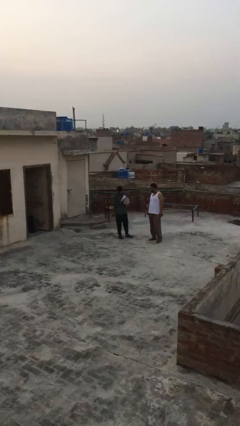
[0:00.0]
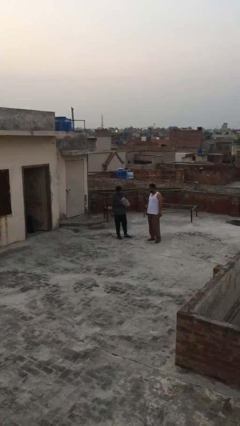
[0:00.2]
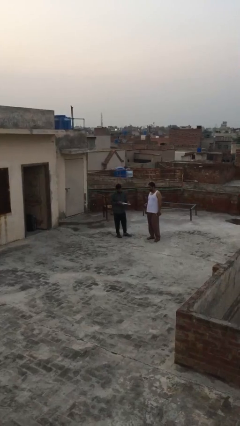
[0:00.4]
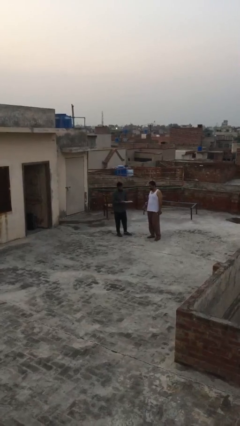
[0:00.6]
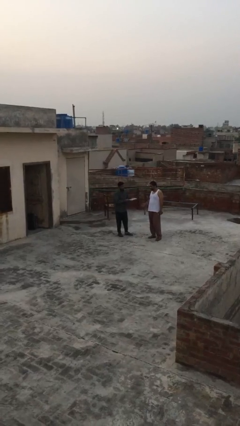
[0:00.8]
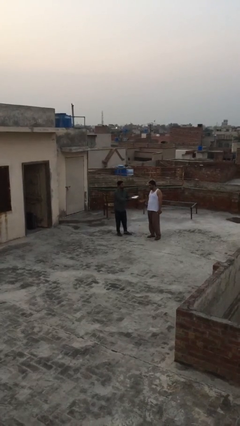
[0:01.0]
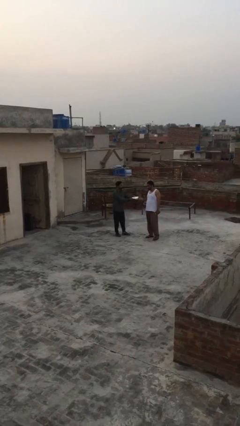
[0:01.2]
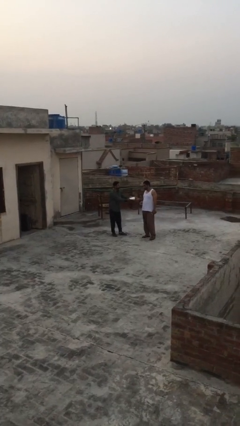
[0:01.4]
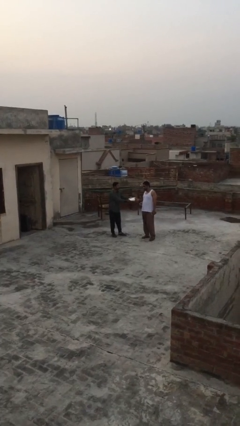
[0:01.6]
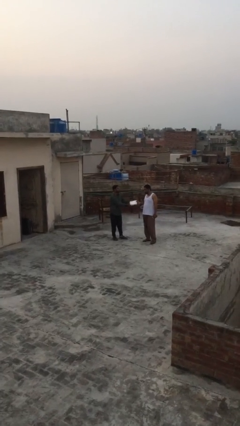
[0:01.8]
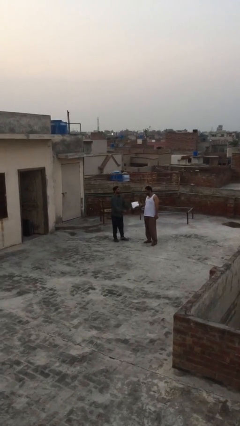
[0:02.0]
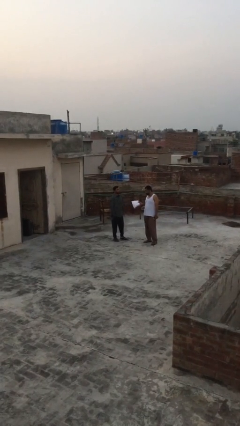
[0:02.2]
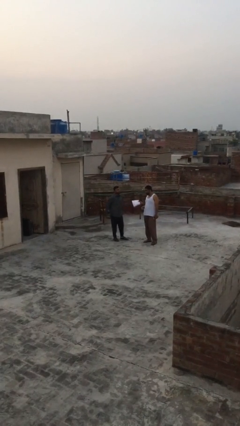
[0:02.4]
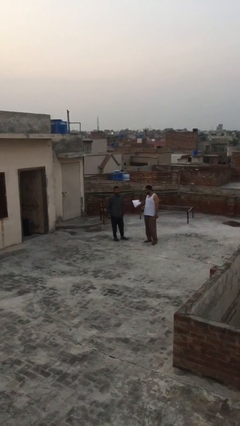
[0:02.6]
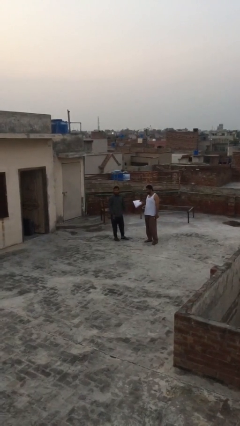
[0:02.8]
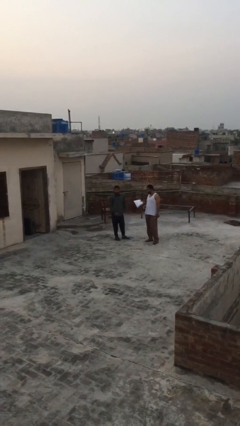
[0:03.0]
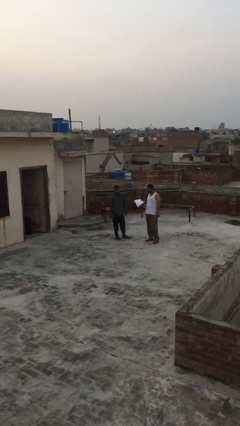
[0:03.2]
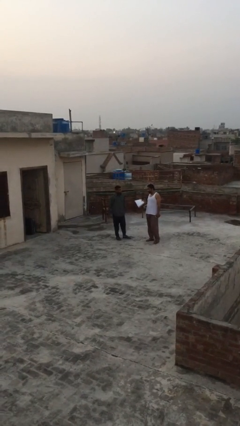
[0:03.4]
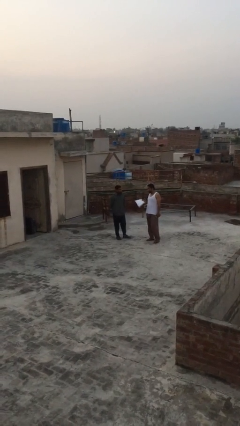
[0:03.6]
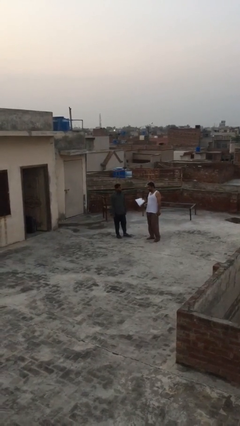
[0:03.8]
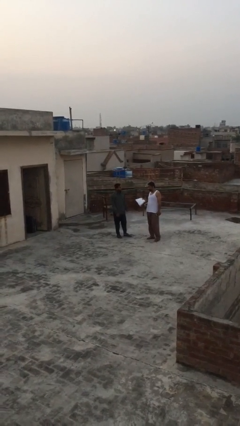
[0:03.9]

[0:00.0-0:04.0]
person transfers object to person

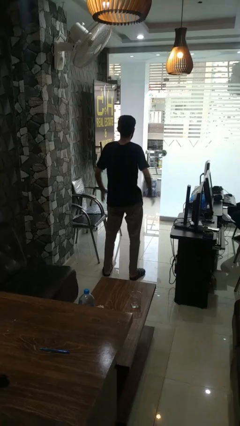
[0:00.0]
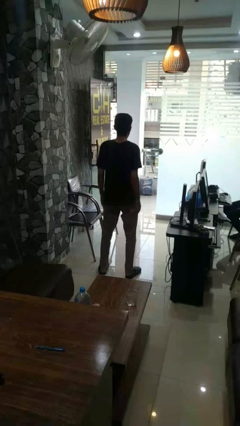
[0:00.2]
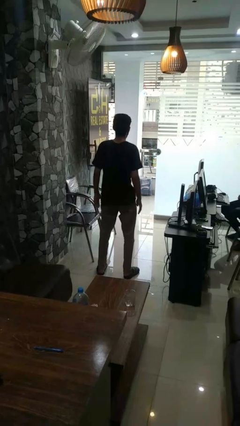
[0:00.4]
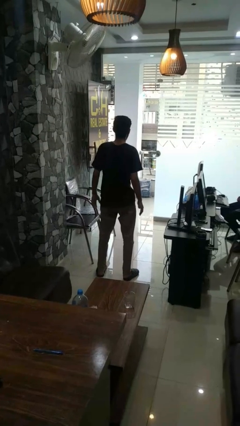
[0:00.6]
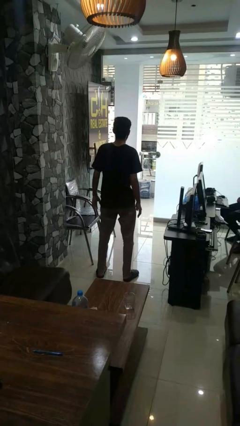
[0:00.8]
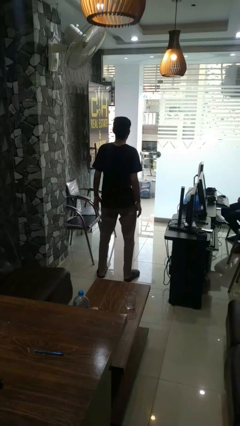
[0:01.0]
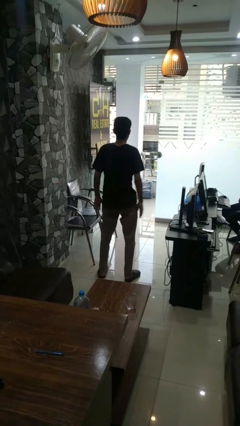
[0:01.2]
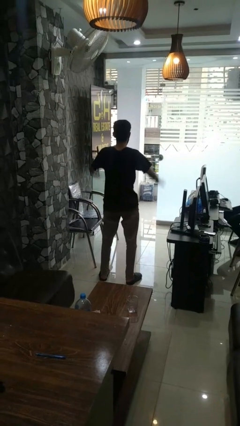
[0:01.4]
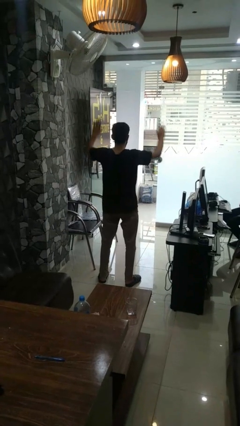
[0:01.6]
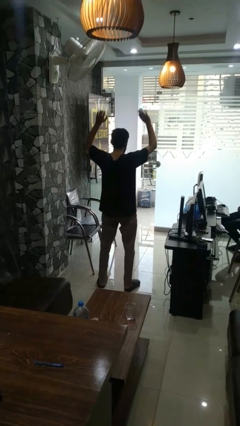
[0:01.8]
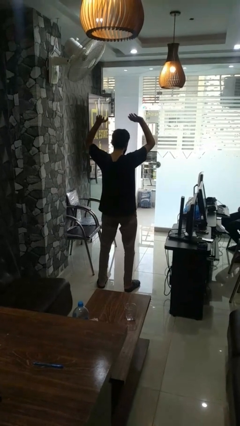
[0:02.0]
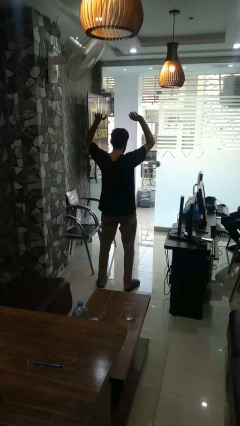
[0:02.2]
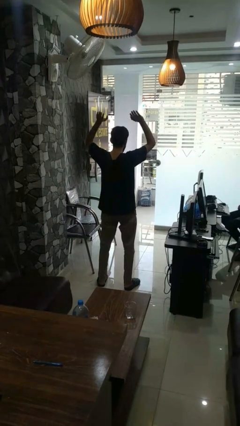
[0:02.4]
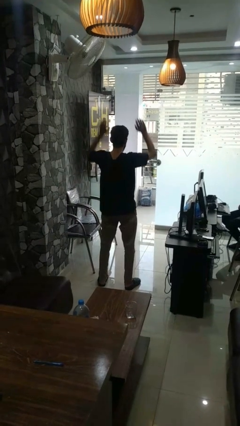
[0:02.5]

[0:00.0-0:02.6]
person stretches arms over head

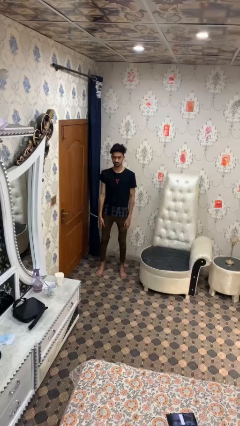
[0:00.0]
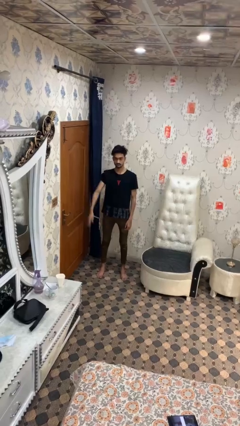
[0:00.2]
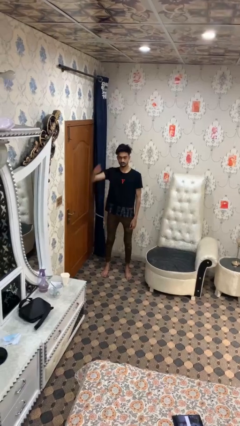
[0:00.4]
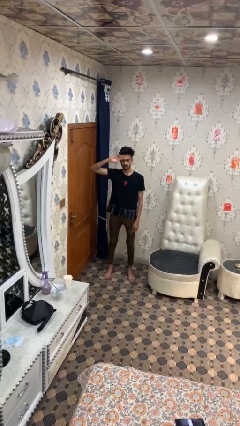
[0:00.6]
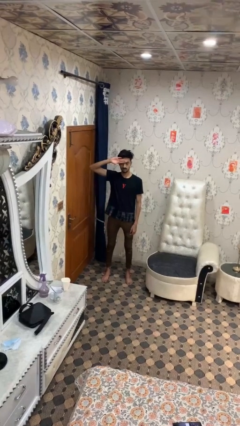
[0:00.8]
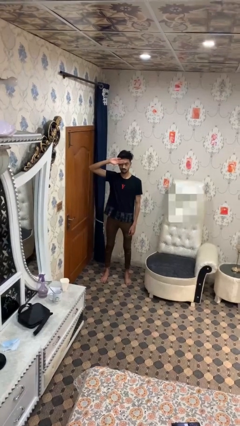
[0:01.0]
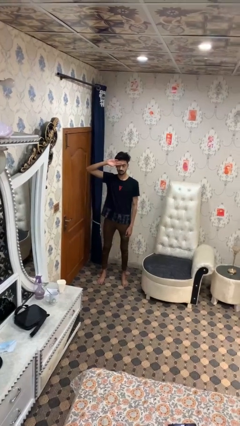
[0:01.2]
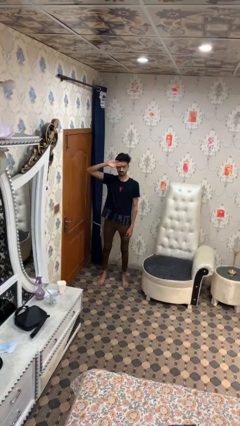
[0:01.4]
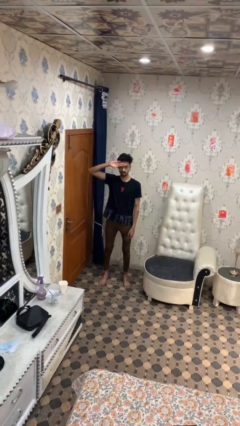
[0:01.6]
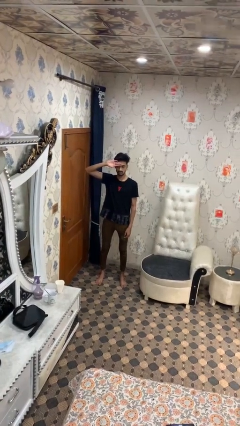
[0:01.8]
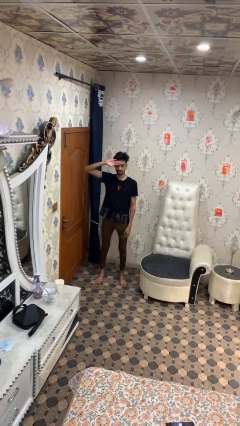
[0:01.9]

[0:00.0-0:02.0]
person salutes

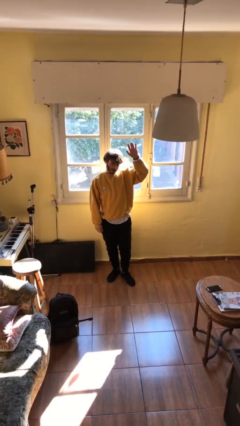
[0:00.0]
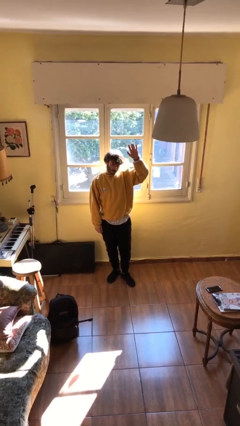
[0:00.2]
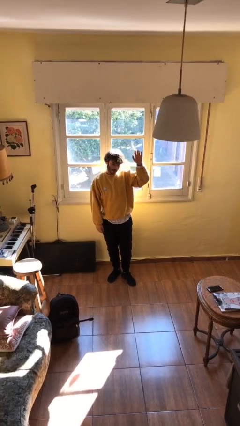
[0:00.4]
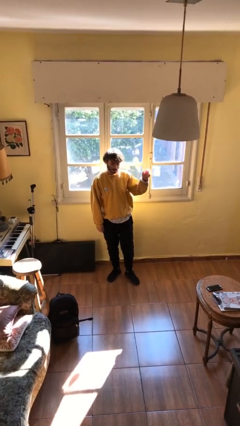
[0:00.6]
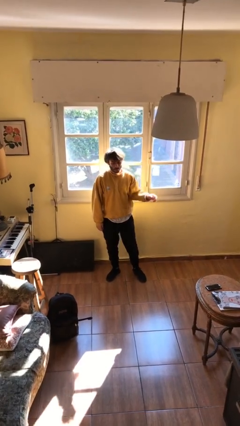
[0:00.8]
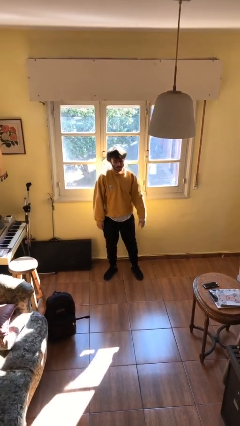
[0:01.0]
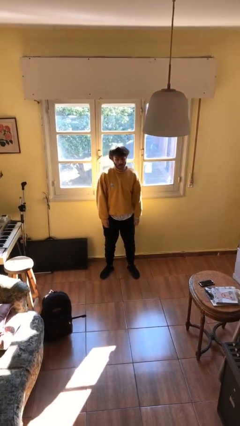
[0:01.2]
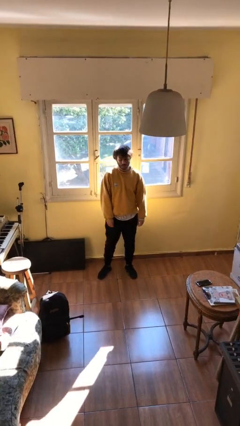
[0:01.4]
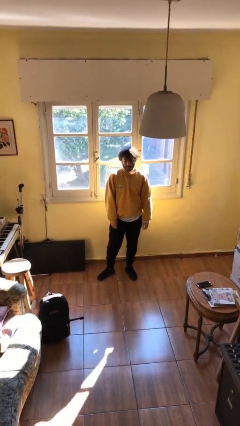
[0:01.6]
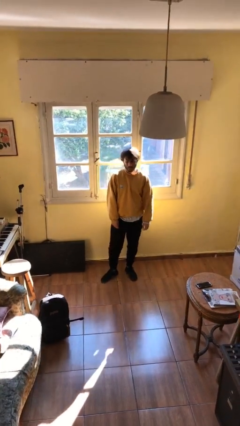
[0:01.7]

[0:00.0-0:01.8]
person gestures lower hand

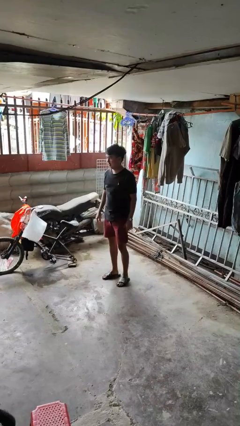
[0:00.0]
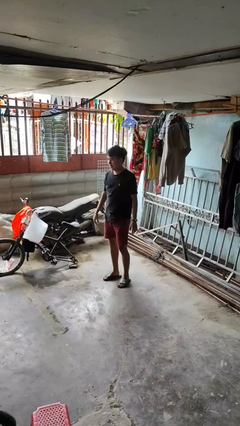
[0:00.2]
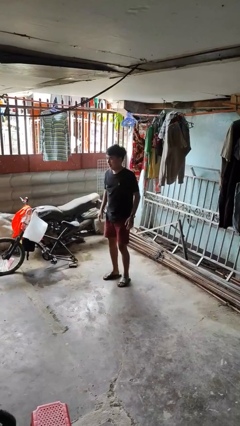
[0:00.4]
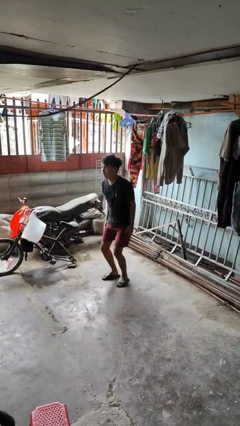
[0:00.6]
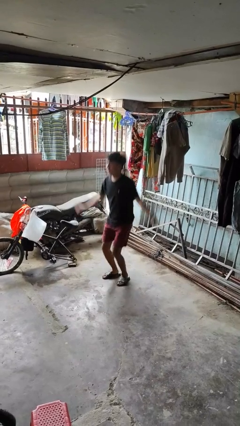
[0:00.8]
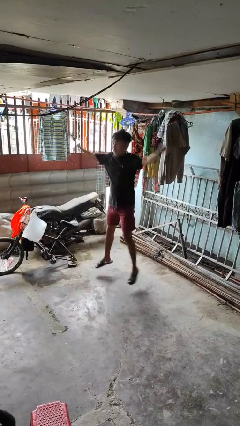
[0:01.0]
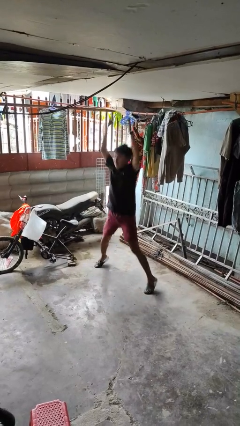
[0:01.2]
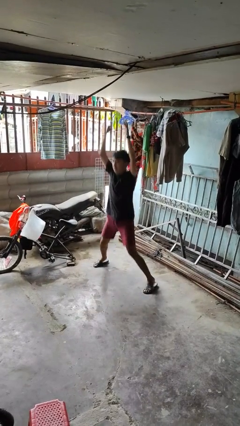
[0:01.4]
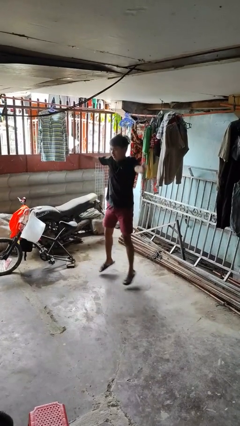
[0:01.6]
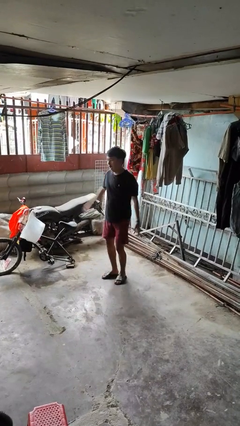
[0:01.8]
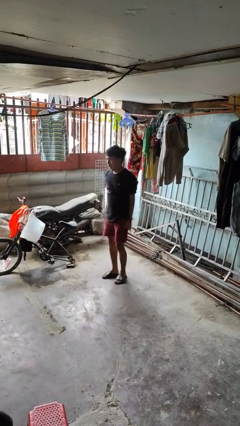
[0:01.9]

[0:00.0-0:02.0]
person exercises with jumping jacks

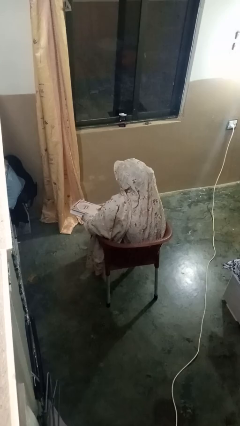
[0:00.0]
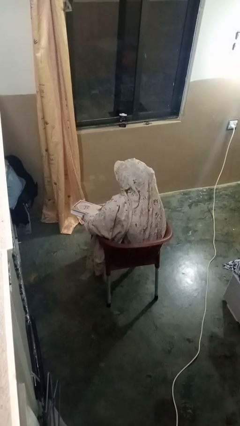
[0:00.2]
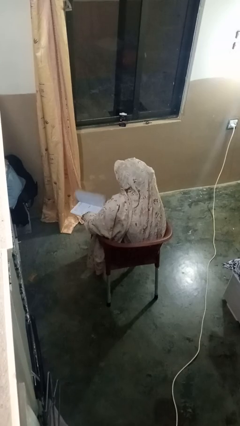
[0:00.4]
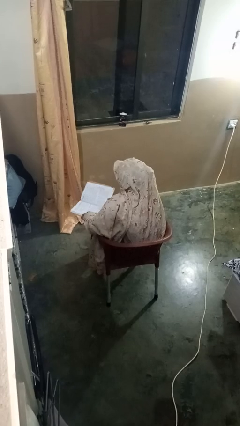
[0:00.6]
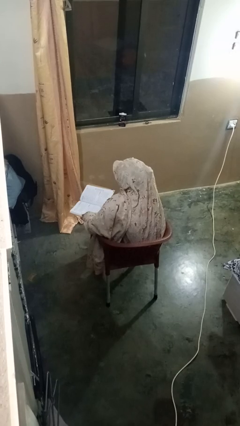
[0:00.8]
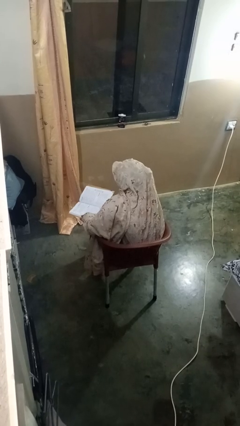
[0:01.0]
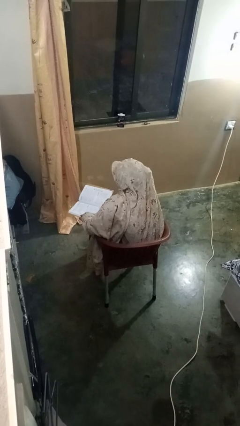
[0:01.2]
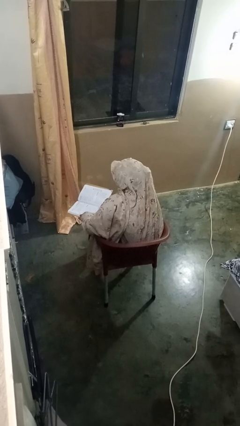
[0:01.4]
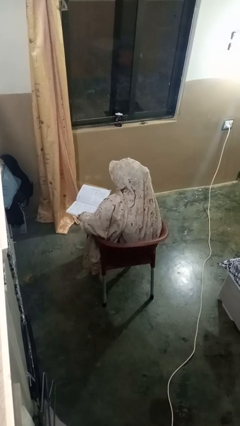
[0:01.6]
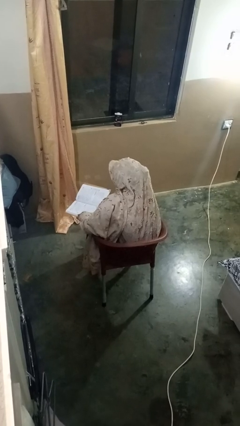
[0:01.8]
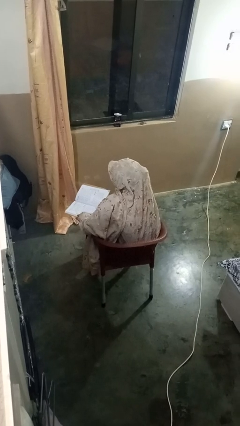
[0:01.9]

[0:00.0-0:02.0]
person reads book

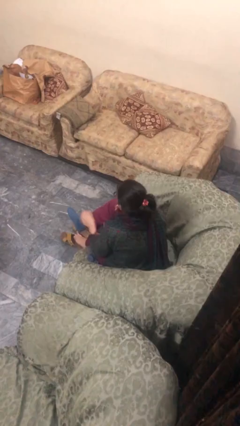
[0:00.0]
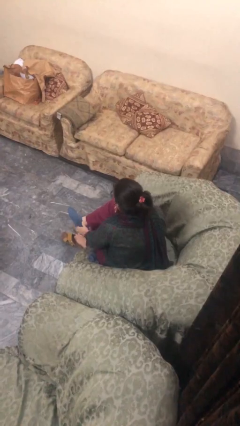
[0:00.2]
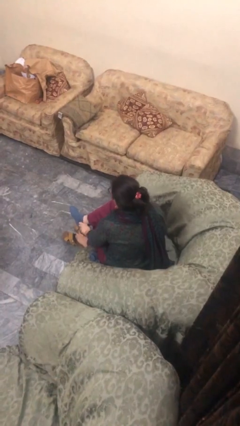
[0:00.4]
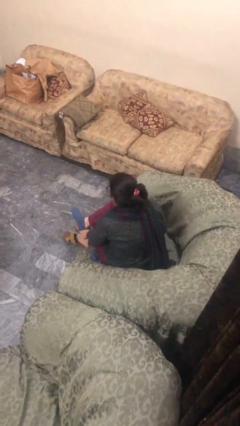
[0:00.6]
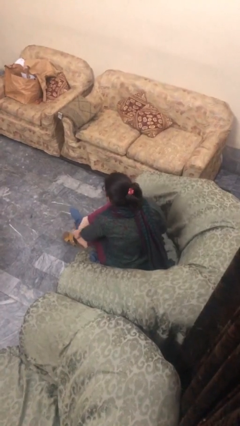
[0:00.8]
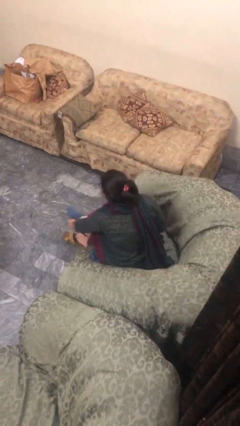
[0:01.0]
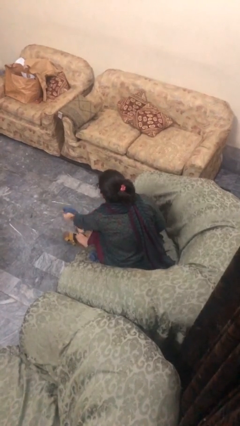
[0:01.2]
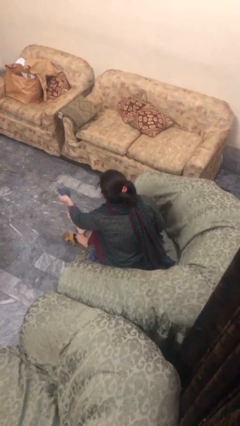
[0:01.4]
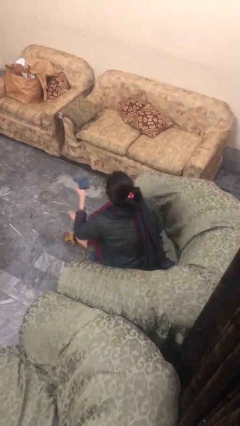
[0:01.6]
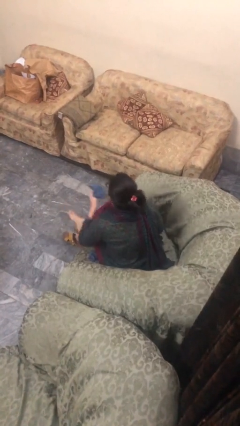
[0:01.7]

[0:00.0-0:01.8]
person takes off socks

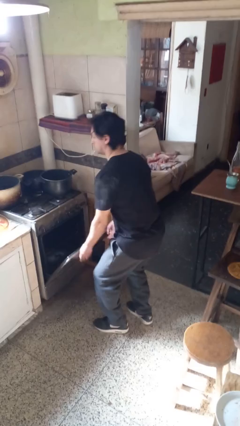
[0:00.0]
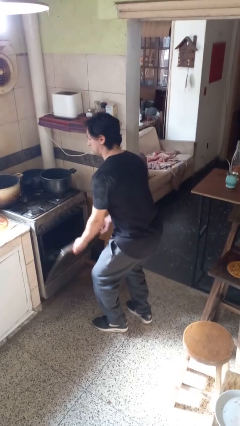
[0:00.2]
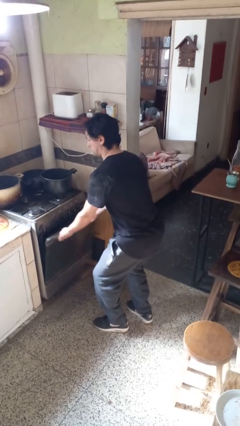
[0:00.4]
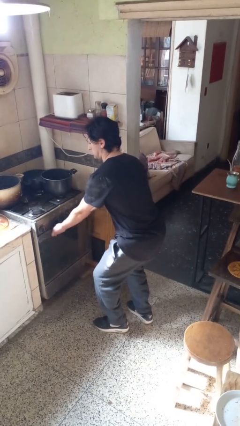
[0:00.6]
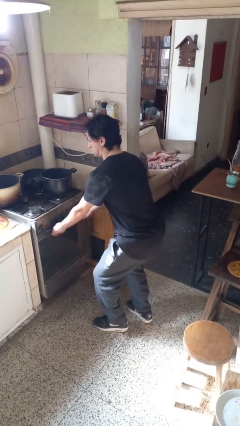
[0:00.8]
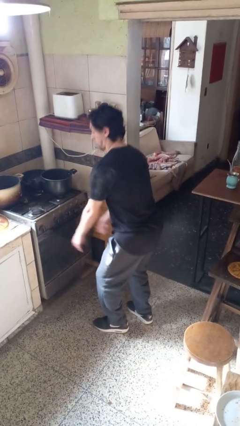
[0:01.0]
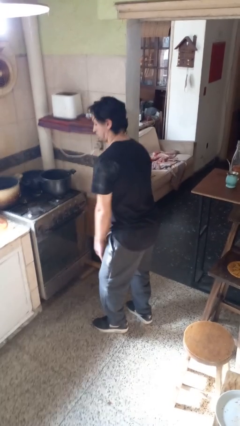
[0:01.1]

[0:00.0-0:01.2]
person closes oven door
